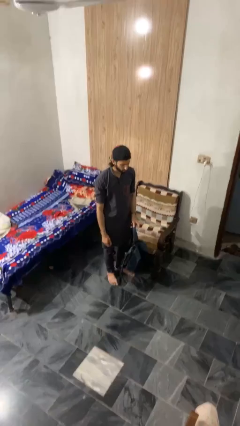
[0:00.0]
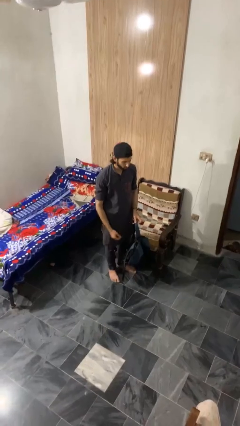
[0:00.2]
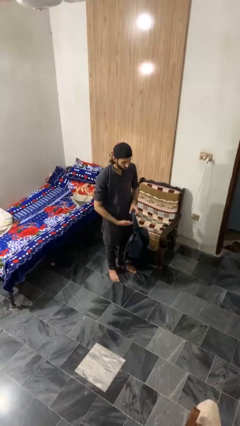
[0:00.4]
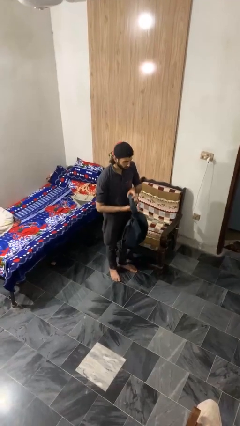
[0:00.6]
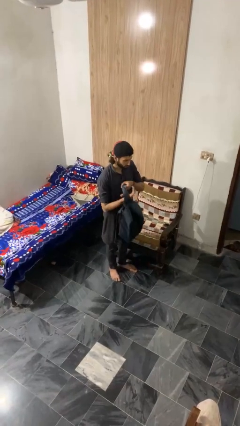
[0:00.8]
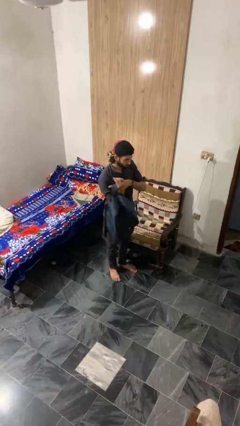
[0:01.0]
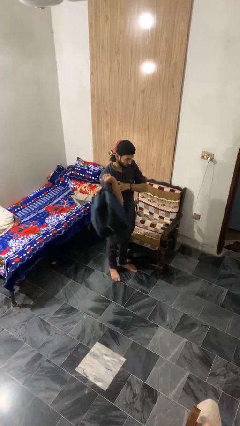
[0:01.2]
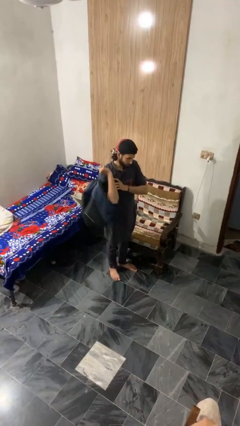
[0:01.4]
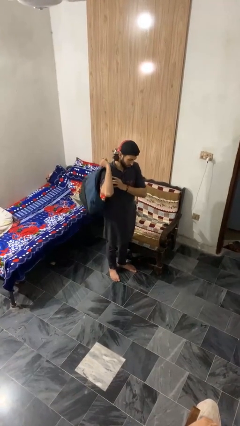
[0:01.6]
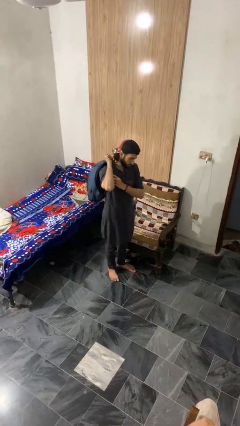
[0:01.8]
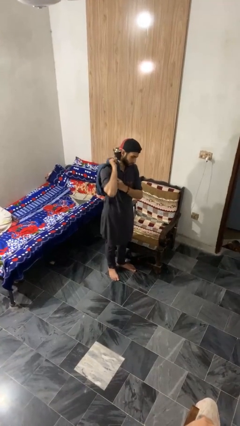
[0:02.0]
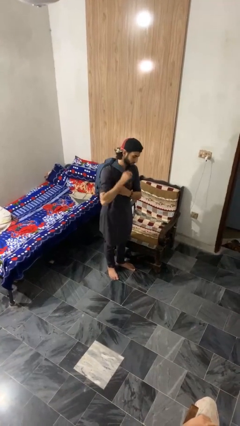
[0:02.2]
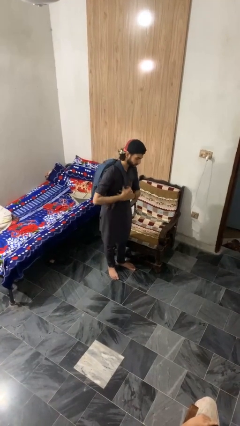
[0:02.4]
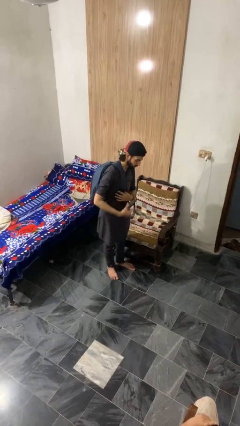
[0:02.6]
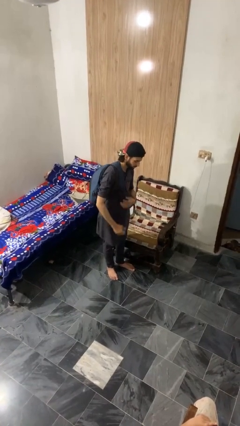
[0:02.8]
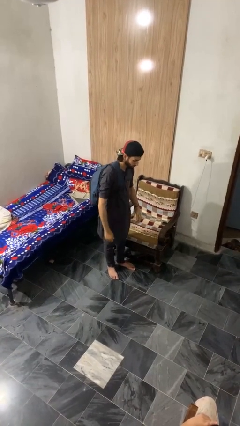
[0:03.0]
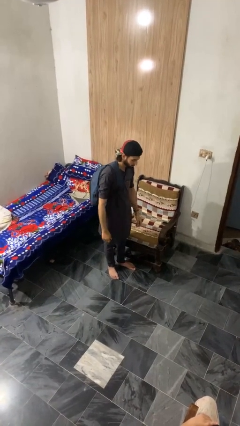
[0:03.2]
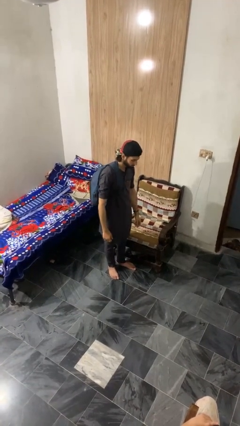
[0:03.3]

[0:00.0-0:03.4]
person puts on backpack

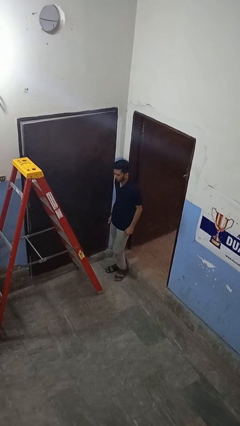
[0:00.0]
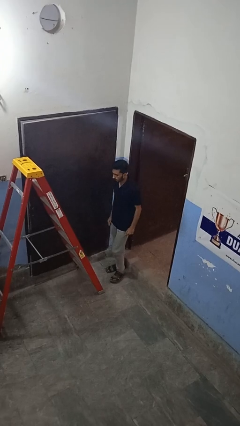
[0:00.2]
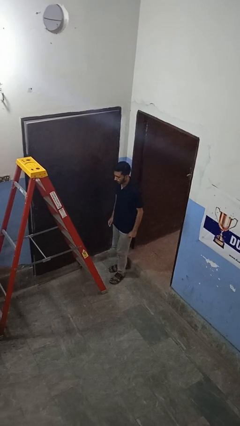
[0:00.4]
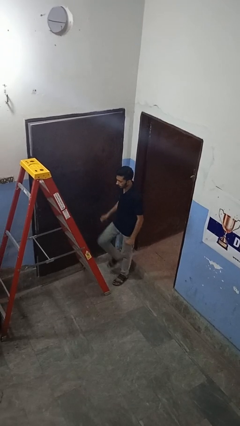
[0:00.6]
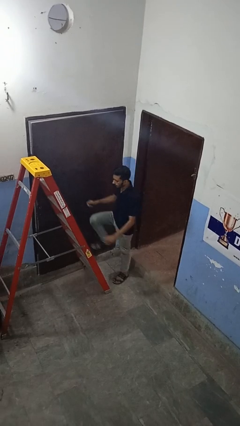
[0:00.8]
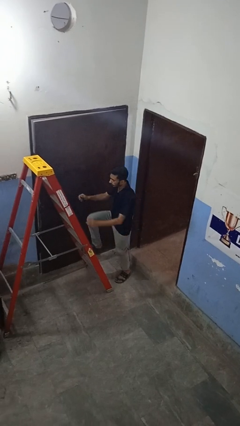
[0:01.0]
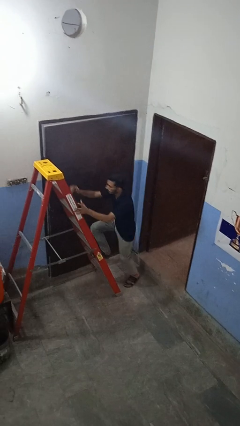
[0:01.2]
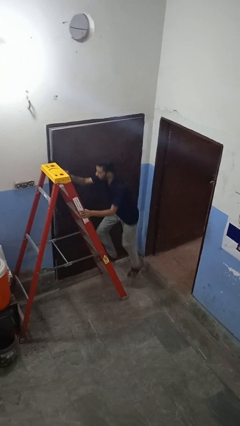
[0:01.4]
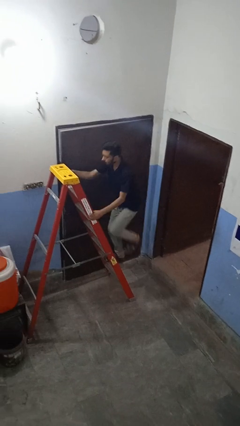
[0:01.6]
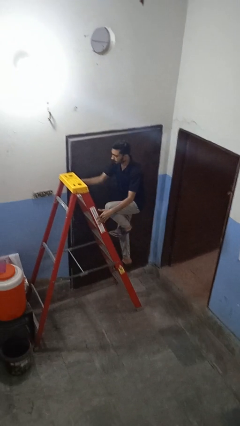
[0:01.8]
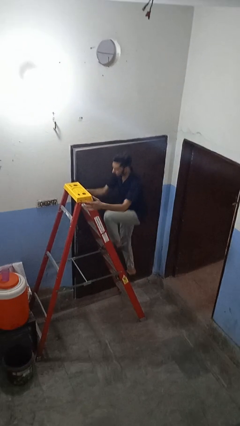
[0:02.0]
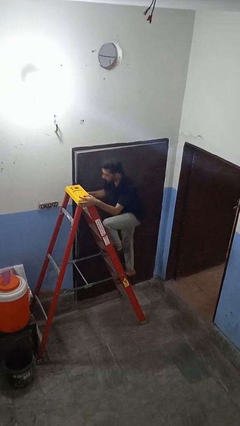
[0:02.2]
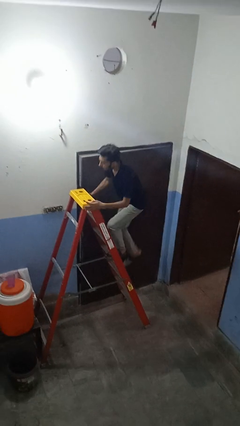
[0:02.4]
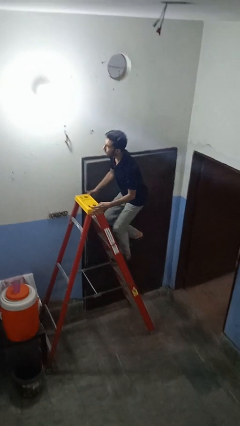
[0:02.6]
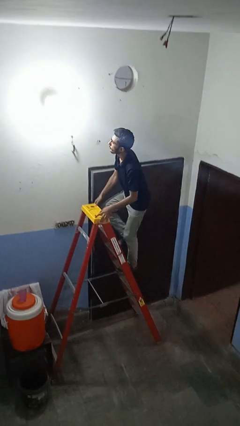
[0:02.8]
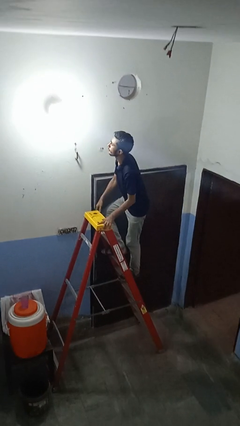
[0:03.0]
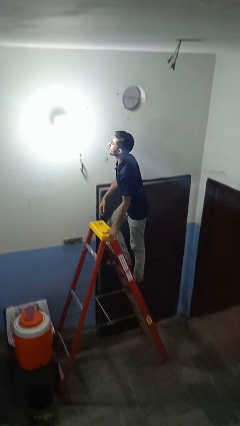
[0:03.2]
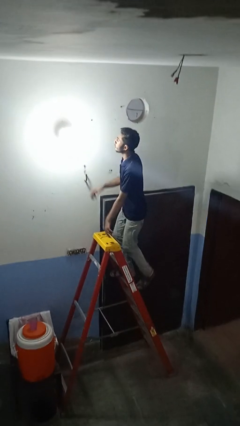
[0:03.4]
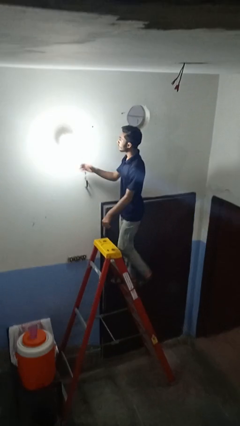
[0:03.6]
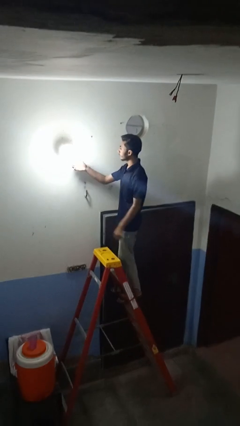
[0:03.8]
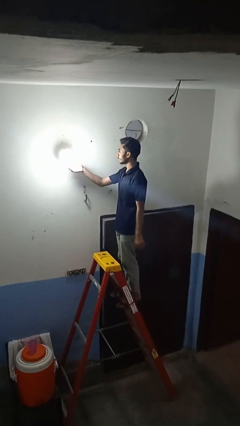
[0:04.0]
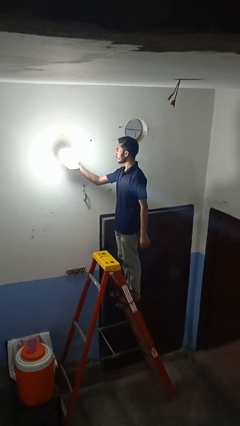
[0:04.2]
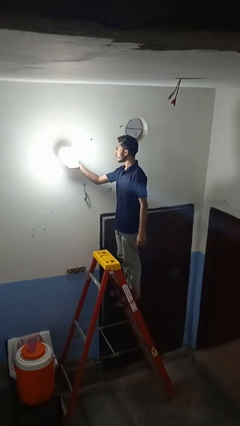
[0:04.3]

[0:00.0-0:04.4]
person climbs up ladder

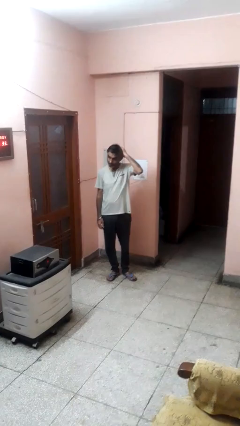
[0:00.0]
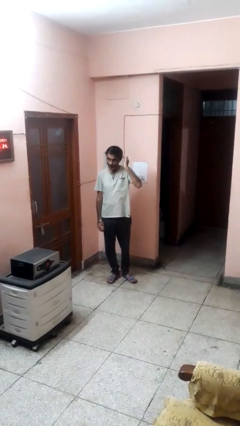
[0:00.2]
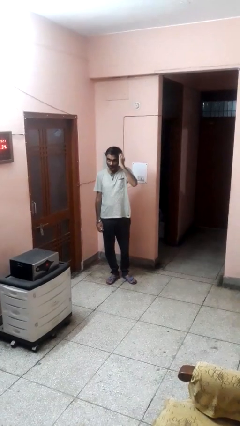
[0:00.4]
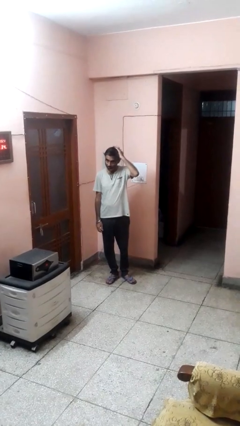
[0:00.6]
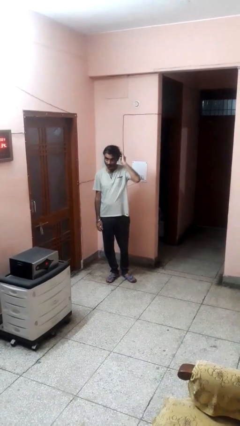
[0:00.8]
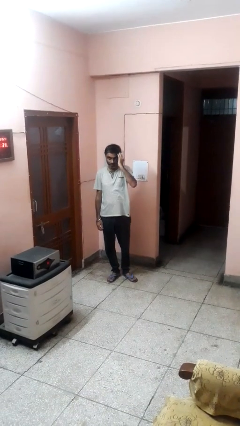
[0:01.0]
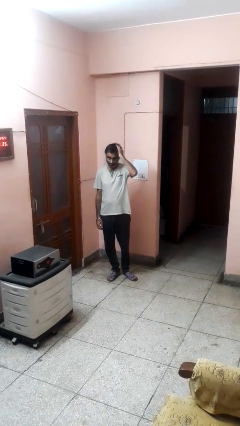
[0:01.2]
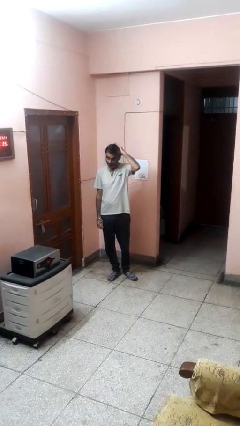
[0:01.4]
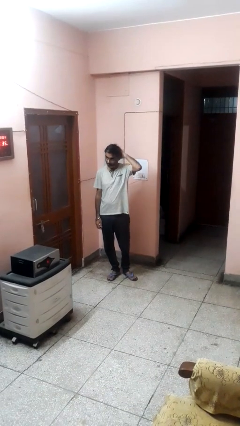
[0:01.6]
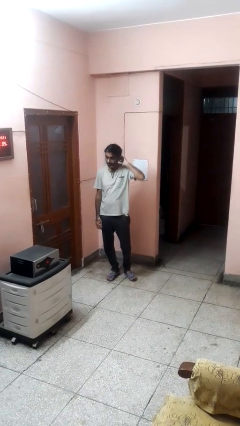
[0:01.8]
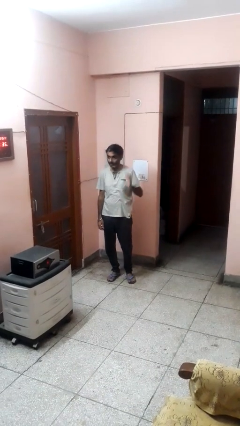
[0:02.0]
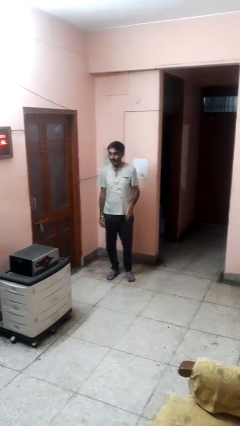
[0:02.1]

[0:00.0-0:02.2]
person strokes hair

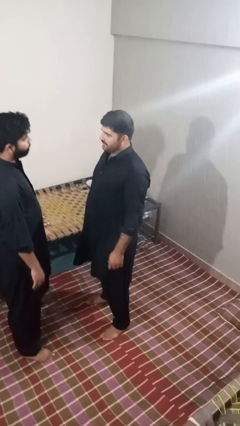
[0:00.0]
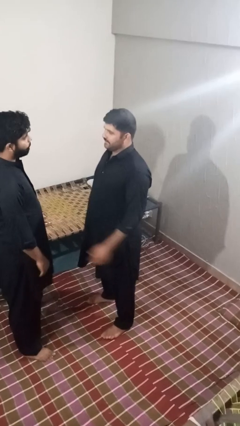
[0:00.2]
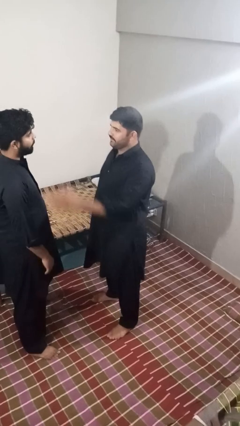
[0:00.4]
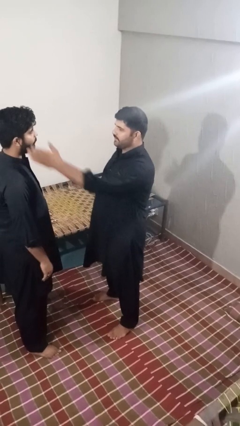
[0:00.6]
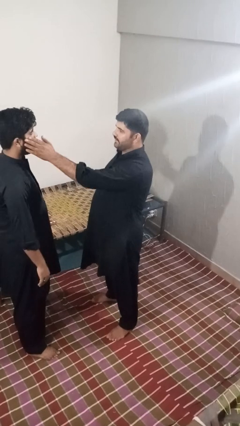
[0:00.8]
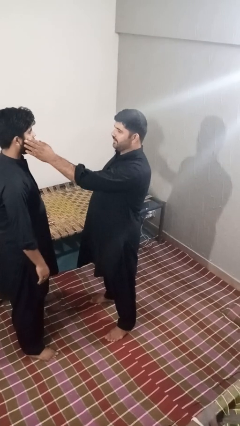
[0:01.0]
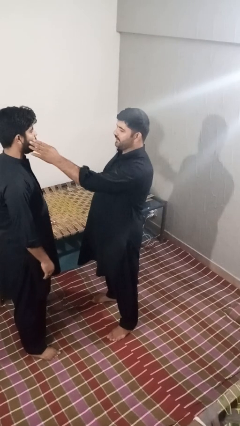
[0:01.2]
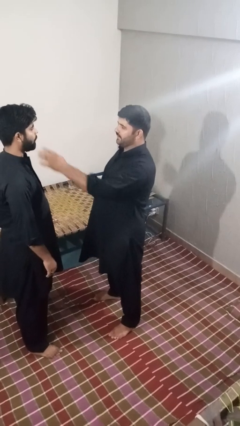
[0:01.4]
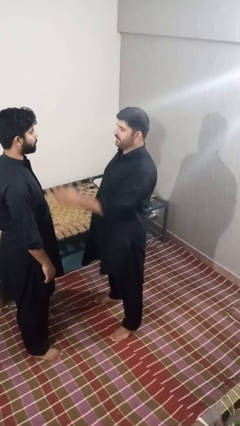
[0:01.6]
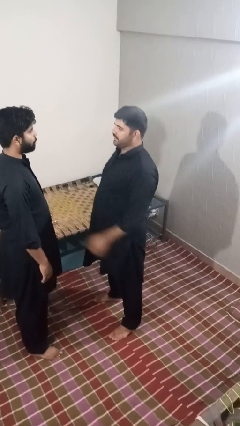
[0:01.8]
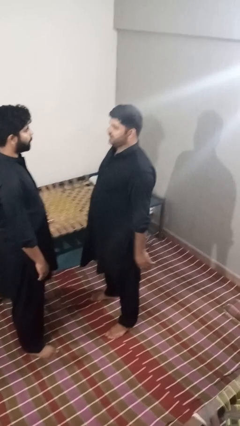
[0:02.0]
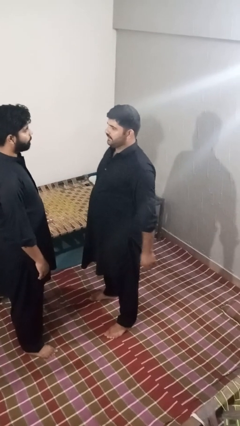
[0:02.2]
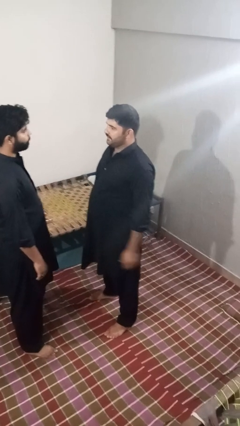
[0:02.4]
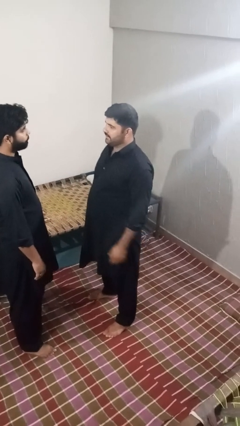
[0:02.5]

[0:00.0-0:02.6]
person touches face of person

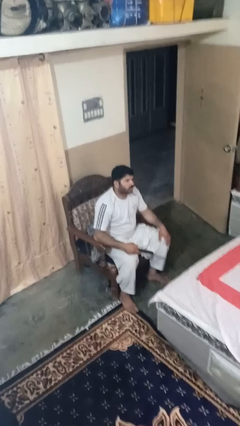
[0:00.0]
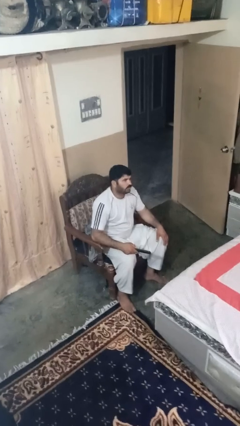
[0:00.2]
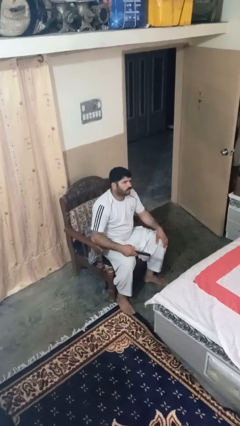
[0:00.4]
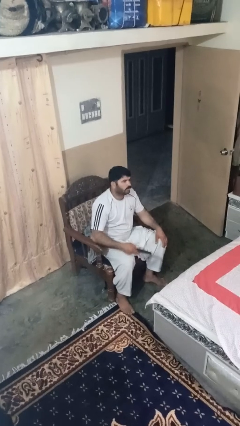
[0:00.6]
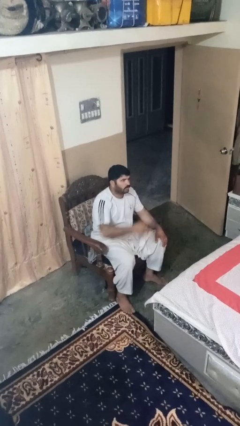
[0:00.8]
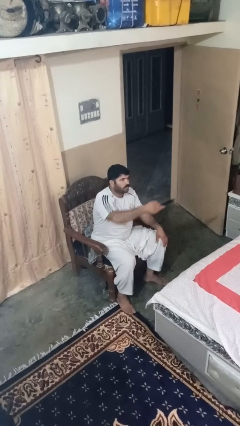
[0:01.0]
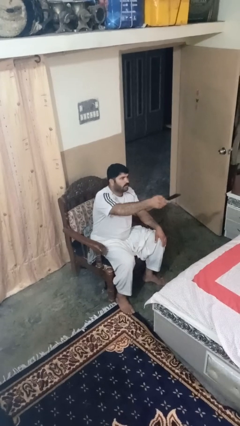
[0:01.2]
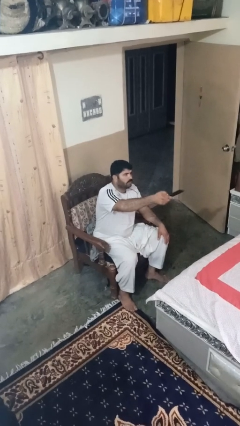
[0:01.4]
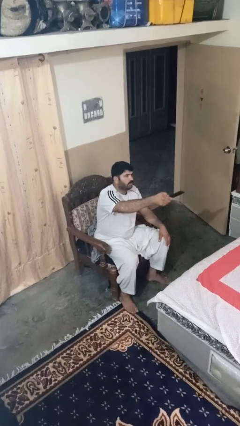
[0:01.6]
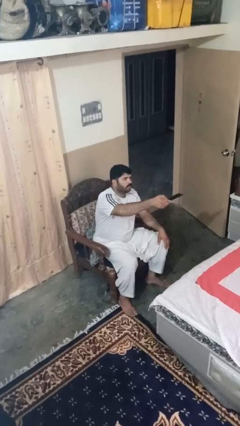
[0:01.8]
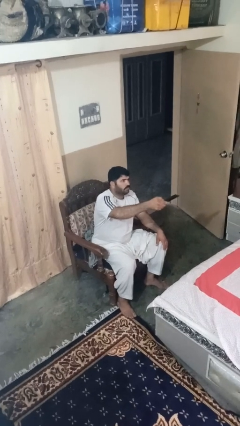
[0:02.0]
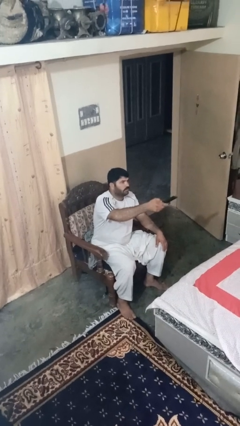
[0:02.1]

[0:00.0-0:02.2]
person uses television remote

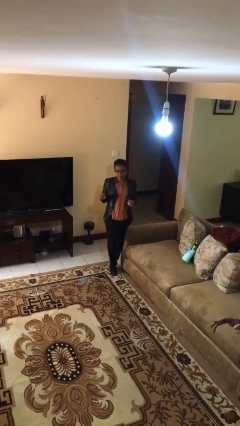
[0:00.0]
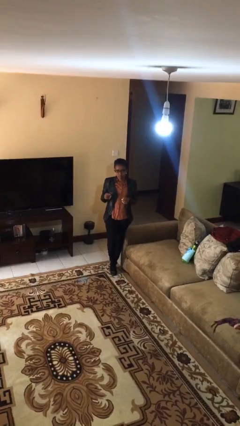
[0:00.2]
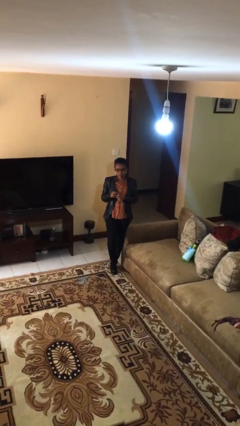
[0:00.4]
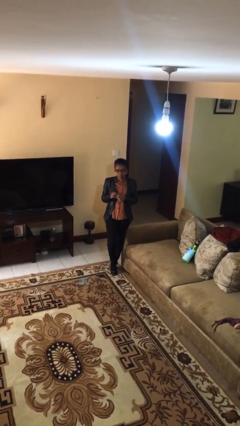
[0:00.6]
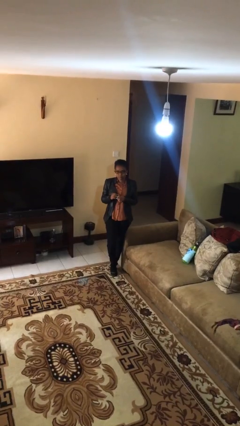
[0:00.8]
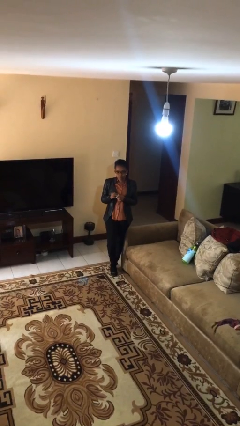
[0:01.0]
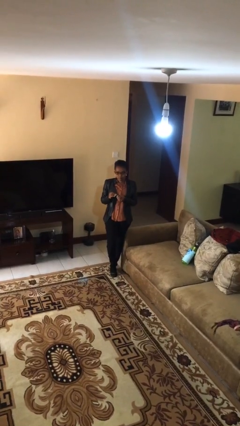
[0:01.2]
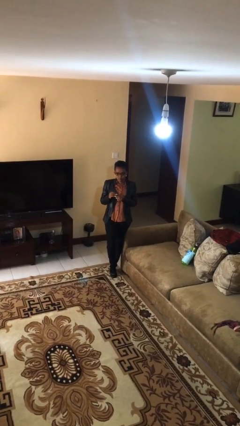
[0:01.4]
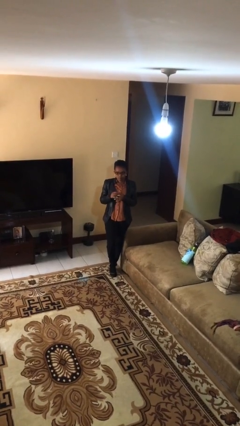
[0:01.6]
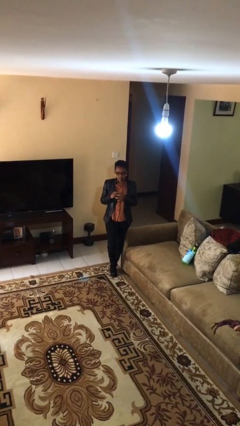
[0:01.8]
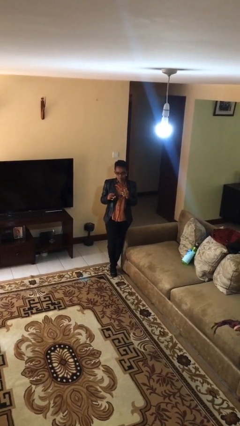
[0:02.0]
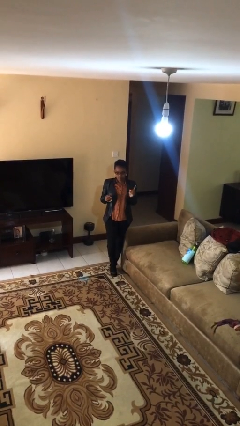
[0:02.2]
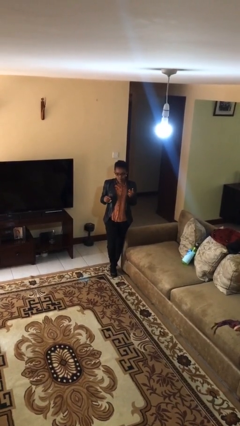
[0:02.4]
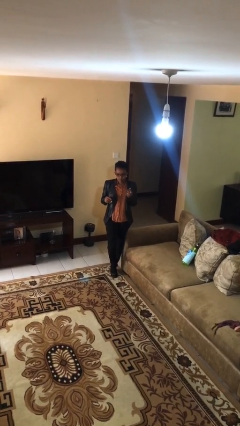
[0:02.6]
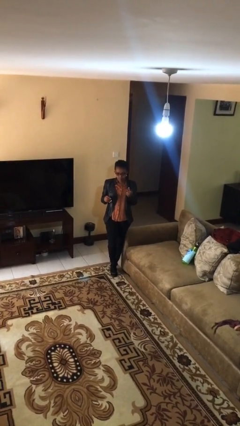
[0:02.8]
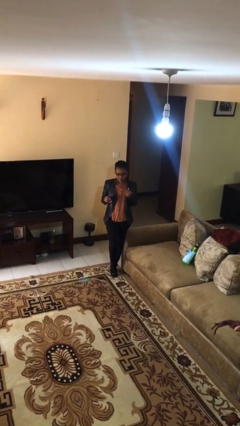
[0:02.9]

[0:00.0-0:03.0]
person puts on ring
